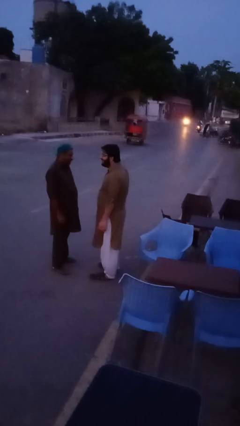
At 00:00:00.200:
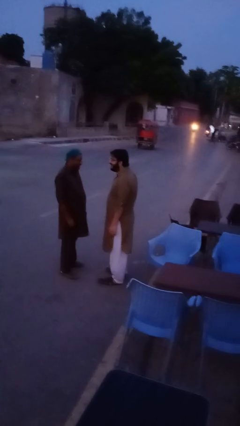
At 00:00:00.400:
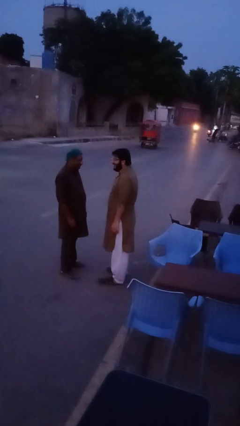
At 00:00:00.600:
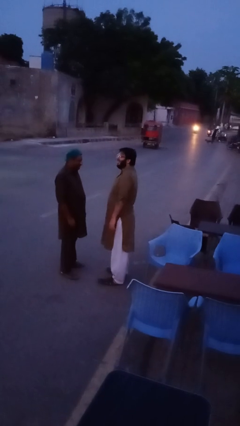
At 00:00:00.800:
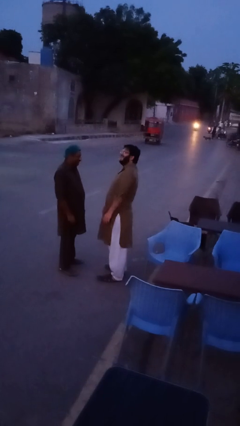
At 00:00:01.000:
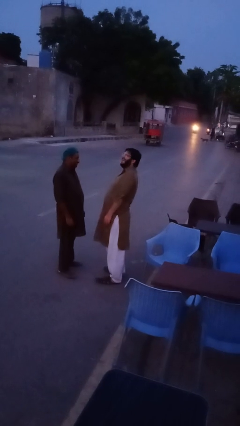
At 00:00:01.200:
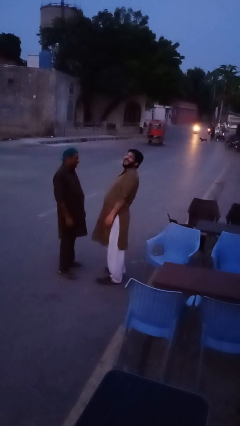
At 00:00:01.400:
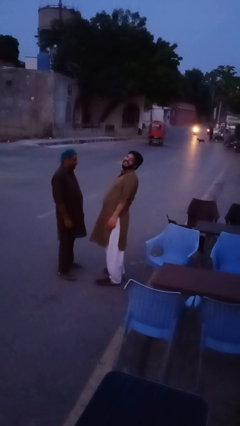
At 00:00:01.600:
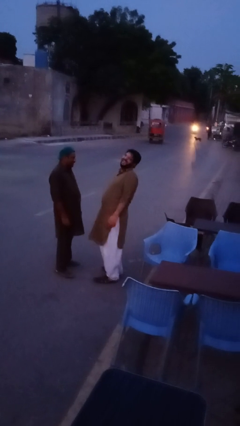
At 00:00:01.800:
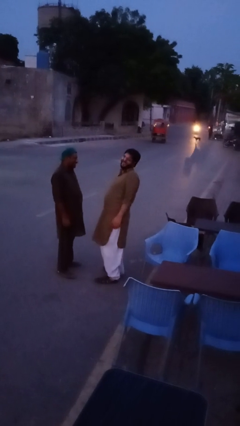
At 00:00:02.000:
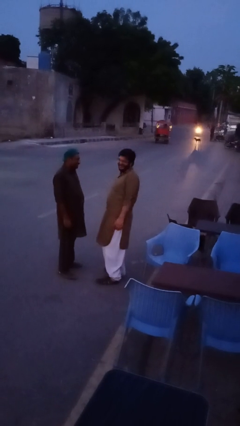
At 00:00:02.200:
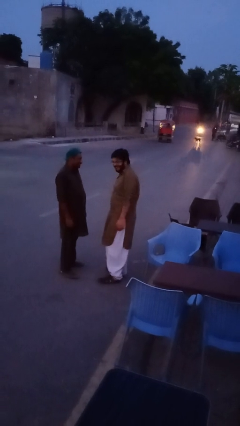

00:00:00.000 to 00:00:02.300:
person laughs with person

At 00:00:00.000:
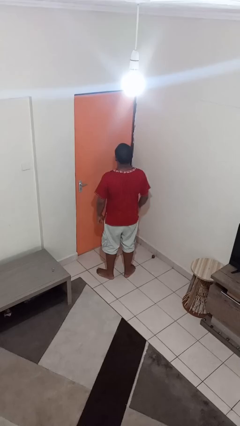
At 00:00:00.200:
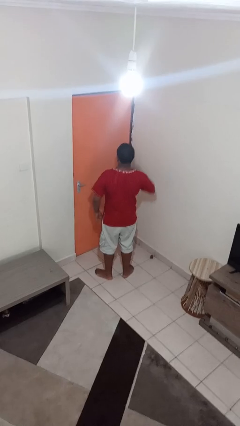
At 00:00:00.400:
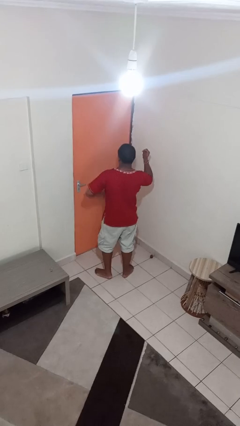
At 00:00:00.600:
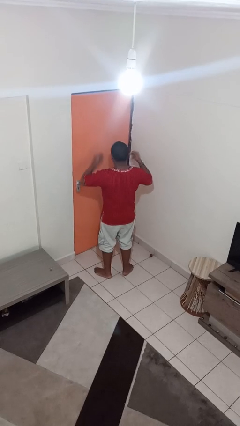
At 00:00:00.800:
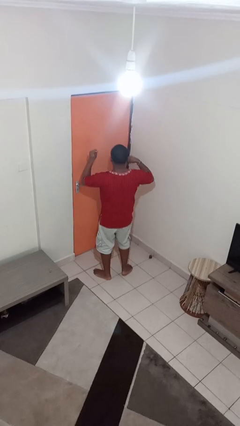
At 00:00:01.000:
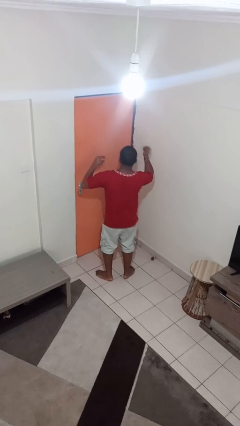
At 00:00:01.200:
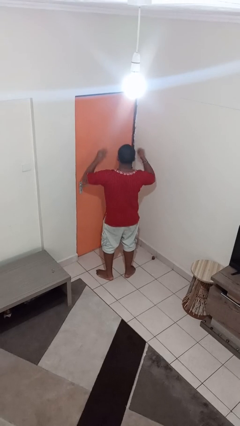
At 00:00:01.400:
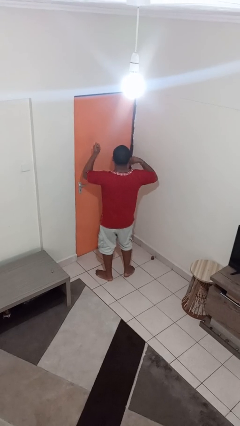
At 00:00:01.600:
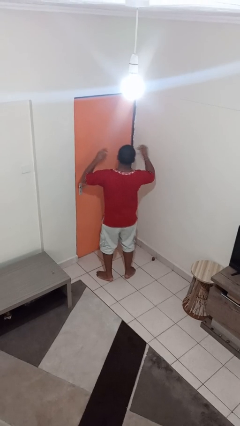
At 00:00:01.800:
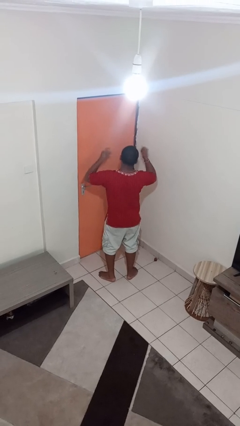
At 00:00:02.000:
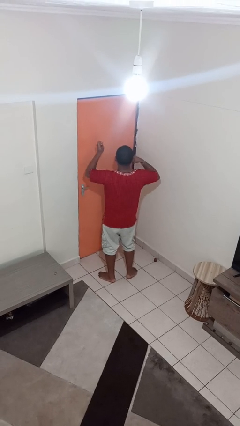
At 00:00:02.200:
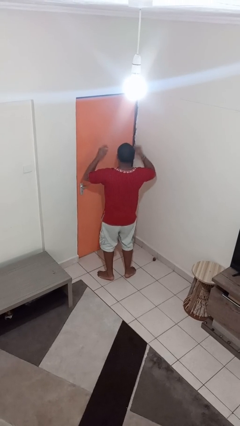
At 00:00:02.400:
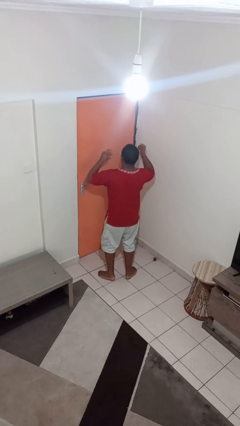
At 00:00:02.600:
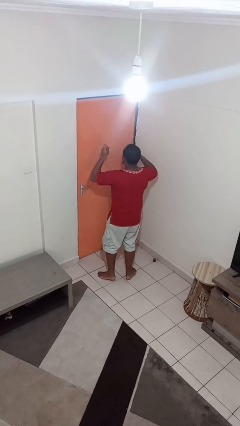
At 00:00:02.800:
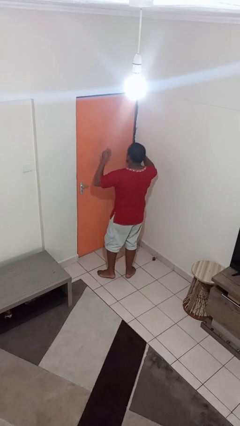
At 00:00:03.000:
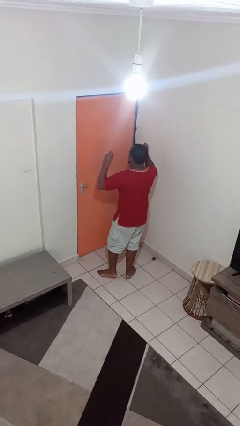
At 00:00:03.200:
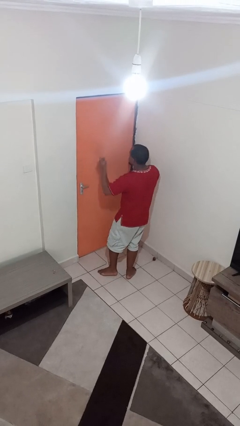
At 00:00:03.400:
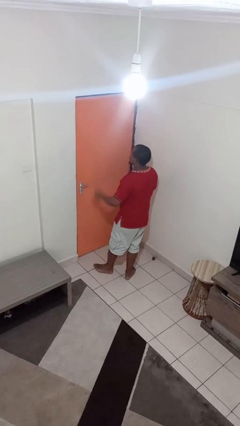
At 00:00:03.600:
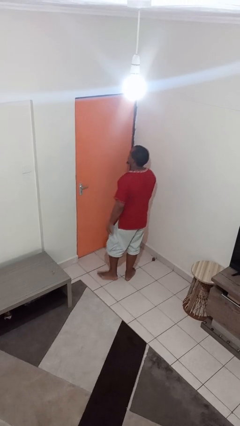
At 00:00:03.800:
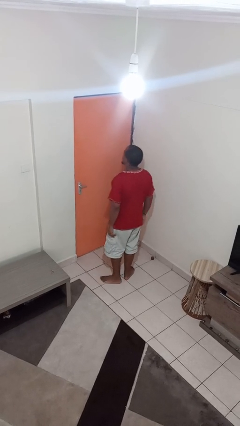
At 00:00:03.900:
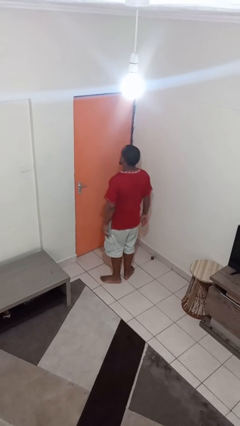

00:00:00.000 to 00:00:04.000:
person snaps fingers

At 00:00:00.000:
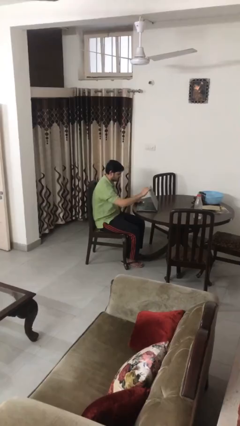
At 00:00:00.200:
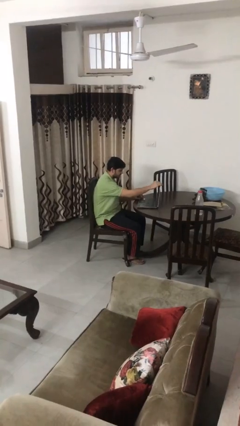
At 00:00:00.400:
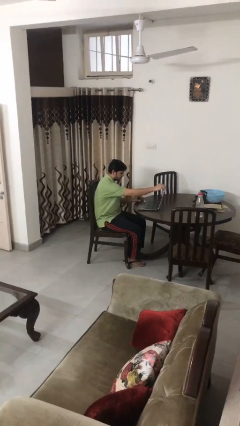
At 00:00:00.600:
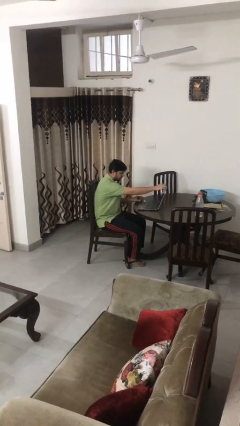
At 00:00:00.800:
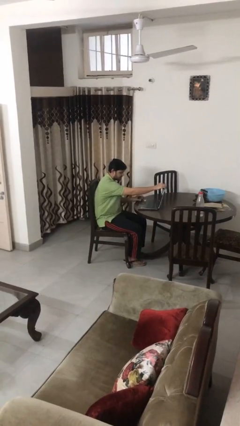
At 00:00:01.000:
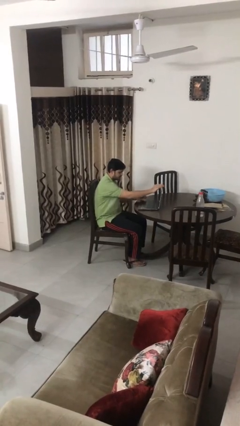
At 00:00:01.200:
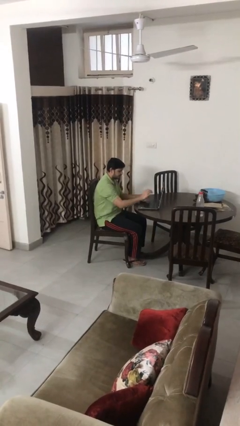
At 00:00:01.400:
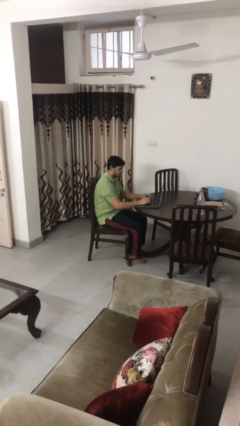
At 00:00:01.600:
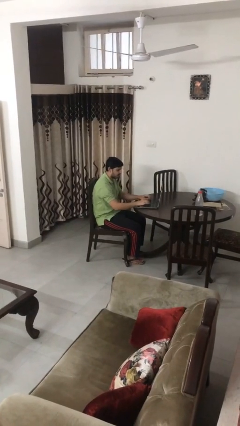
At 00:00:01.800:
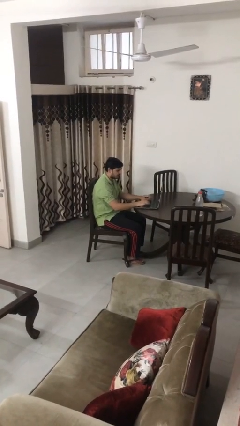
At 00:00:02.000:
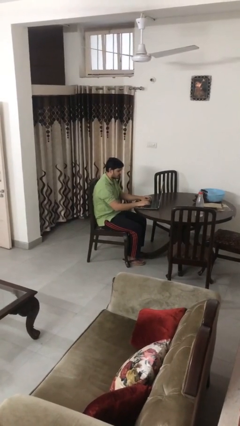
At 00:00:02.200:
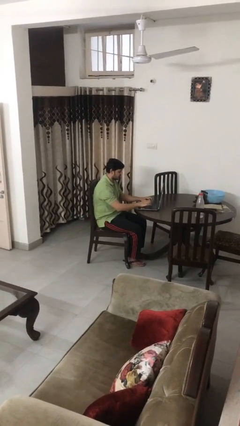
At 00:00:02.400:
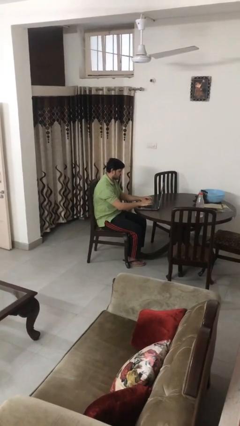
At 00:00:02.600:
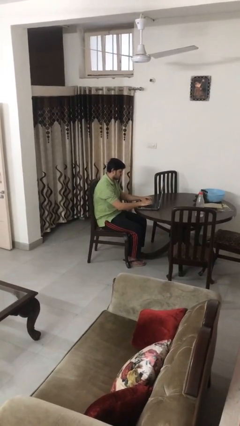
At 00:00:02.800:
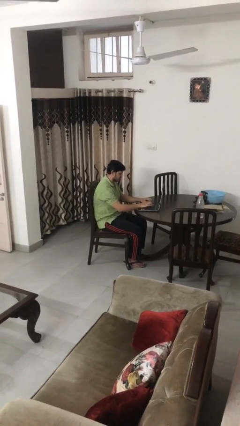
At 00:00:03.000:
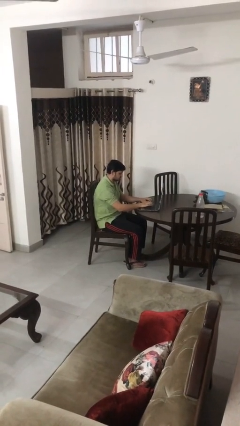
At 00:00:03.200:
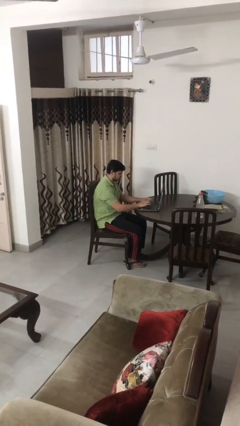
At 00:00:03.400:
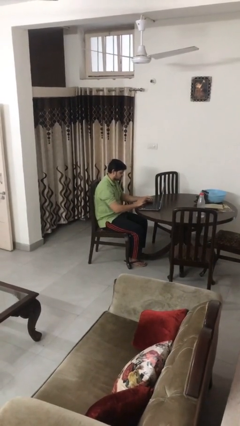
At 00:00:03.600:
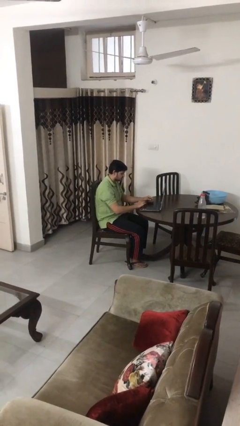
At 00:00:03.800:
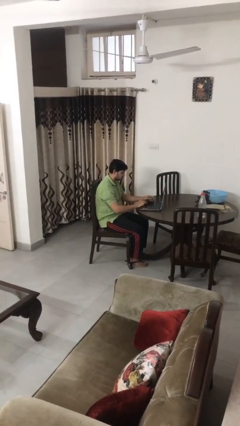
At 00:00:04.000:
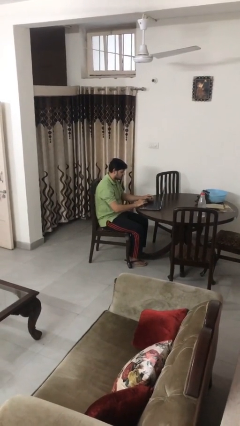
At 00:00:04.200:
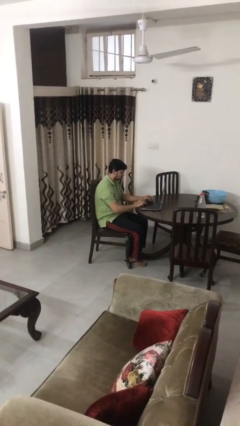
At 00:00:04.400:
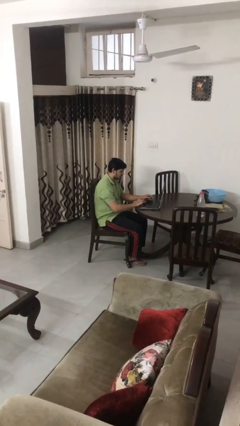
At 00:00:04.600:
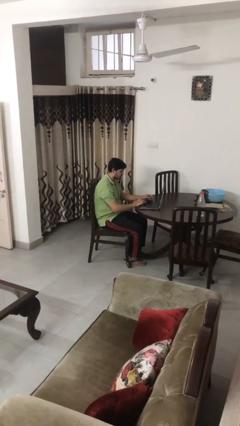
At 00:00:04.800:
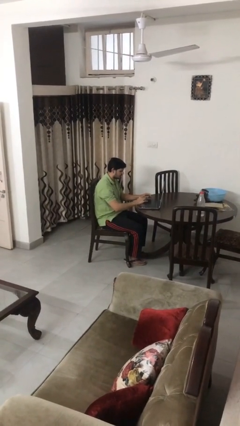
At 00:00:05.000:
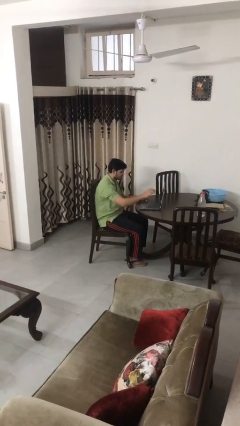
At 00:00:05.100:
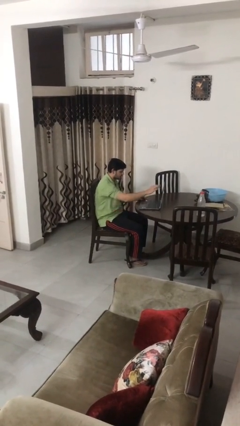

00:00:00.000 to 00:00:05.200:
person interacts with laptop

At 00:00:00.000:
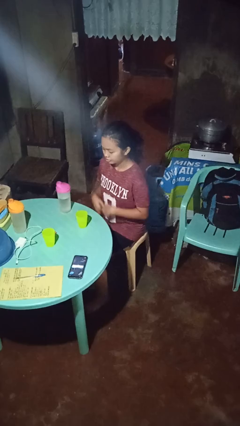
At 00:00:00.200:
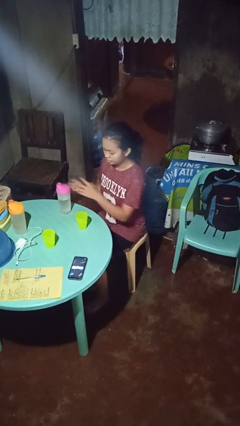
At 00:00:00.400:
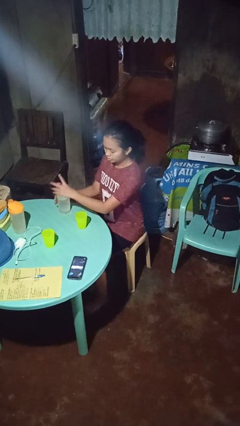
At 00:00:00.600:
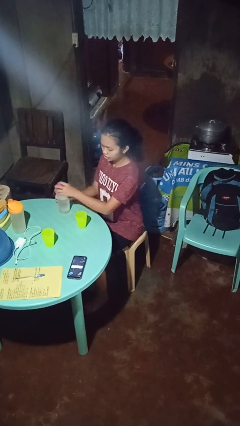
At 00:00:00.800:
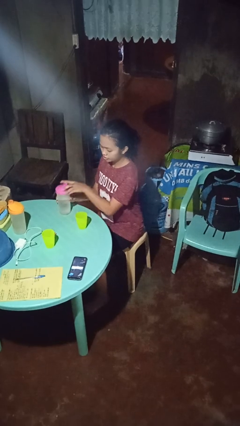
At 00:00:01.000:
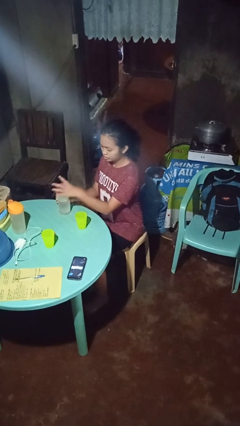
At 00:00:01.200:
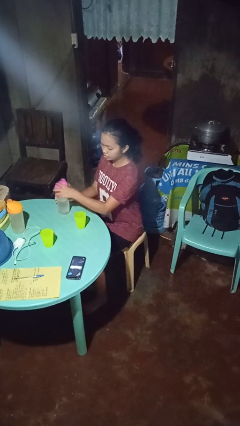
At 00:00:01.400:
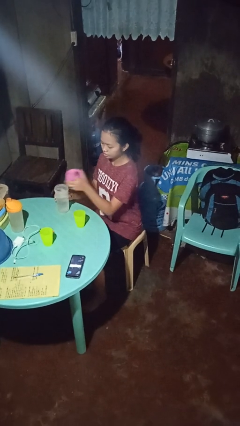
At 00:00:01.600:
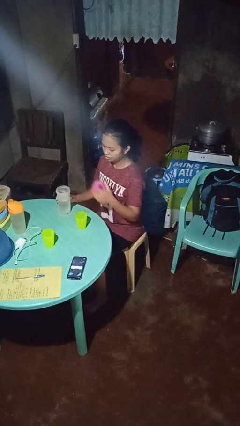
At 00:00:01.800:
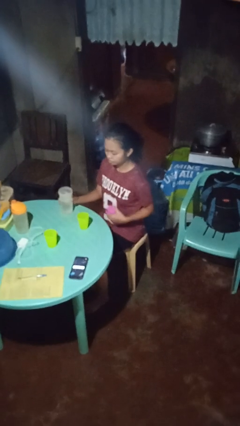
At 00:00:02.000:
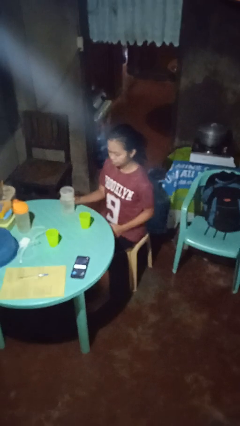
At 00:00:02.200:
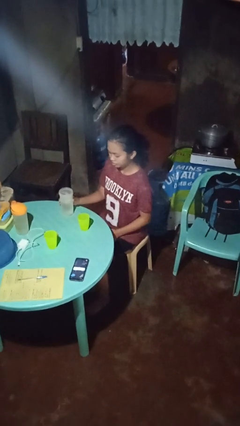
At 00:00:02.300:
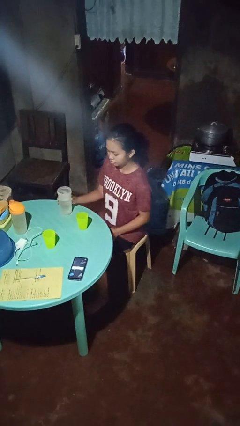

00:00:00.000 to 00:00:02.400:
person unscrews lid from bottle

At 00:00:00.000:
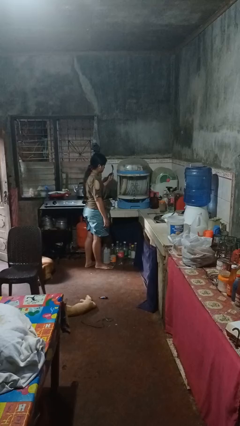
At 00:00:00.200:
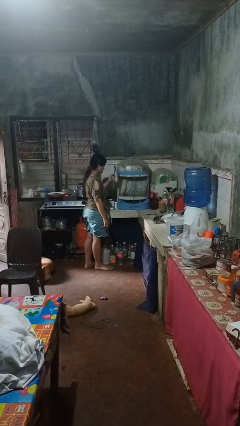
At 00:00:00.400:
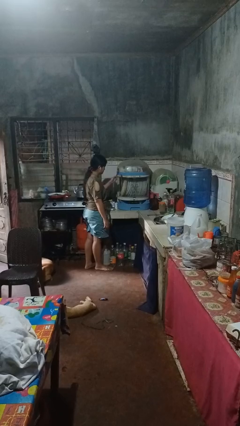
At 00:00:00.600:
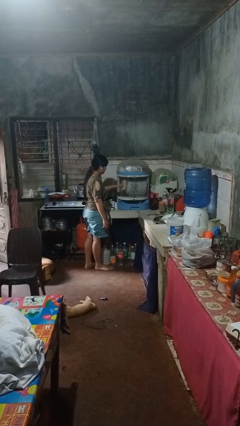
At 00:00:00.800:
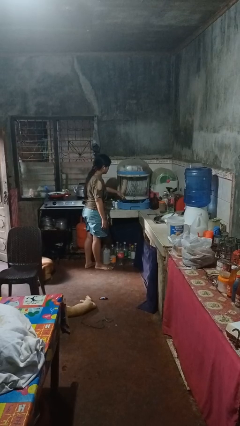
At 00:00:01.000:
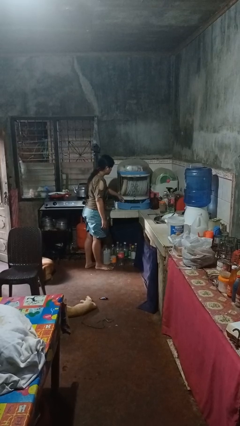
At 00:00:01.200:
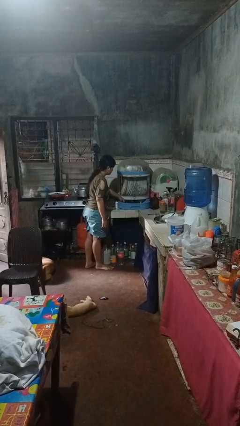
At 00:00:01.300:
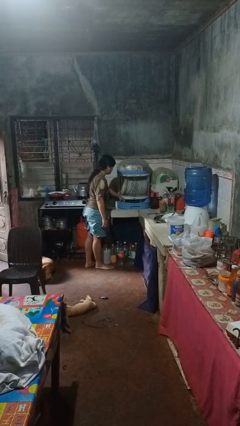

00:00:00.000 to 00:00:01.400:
person puts object into kitchen drawer

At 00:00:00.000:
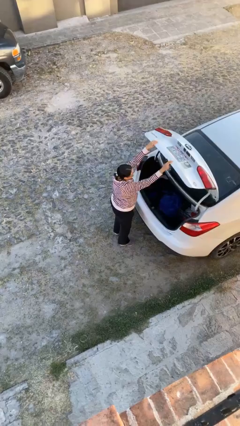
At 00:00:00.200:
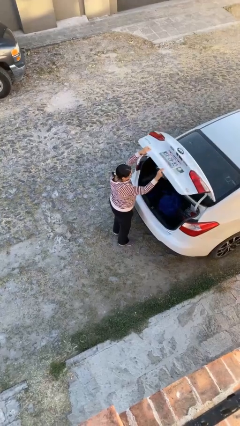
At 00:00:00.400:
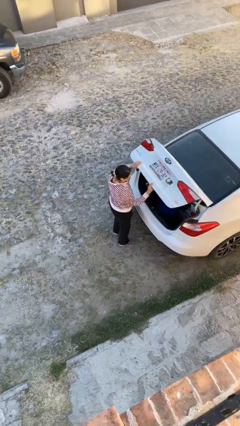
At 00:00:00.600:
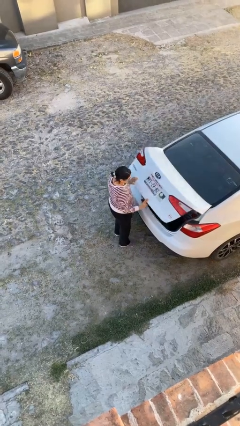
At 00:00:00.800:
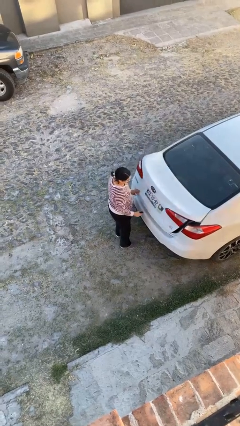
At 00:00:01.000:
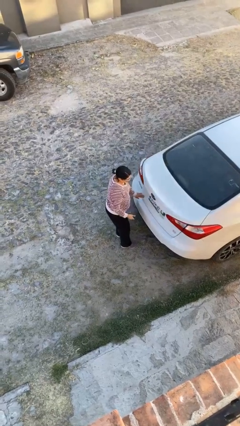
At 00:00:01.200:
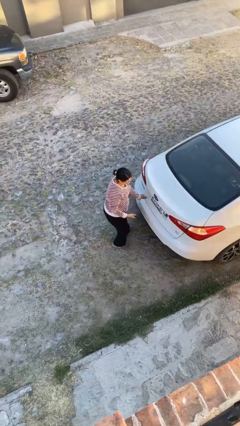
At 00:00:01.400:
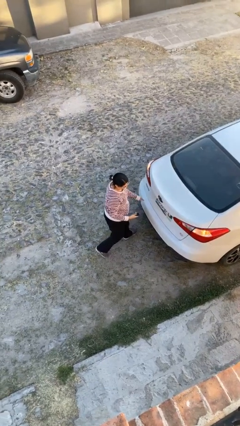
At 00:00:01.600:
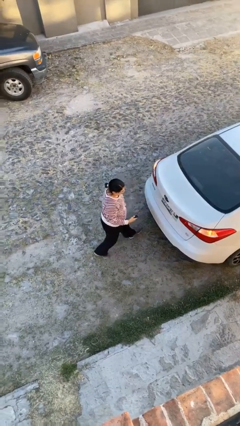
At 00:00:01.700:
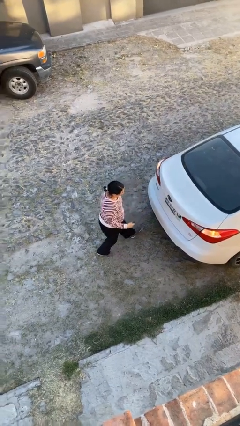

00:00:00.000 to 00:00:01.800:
person closes car trunk
